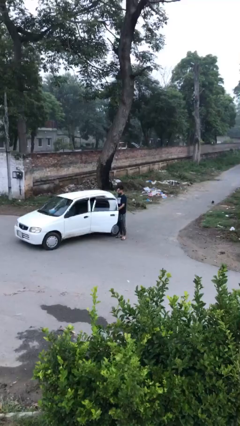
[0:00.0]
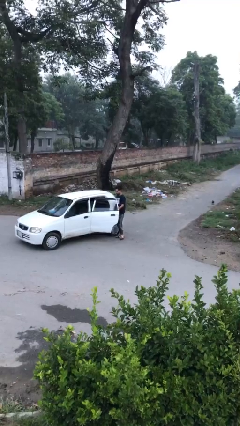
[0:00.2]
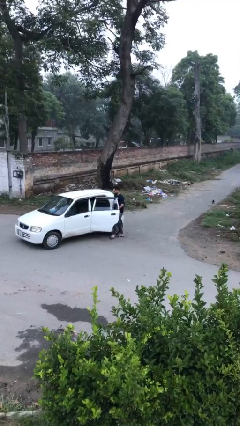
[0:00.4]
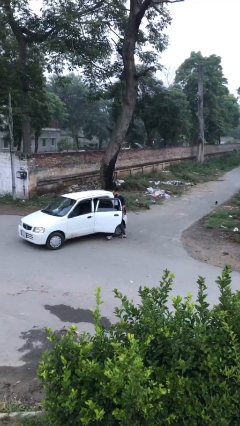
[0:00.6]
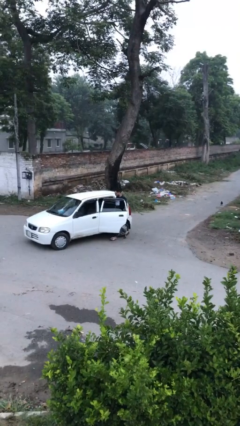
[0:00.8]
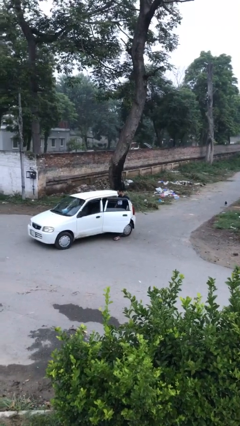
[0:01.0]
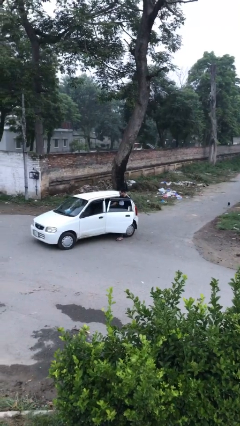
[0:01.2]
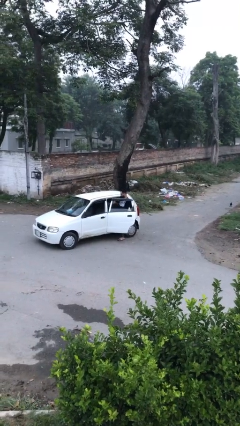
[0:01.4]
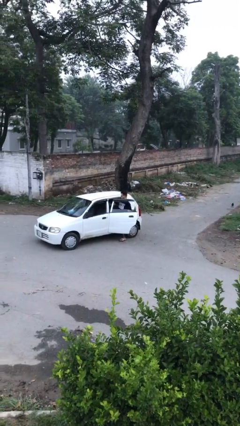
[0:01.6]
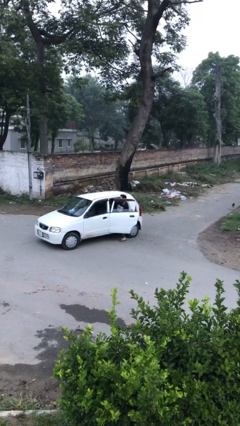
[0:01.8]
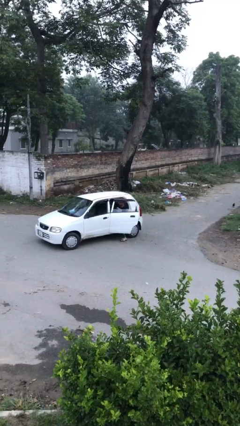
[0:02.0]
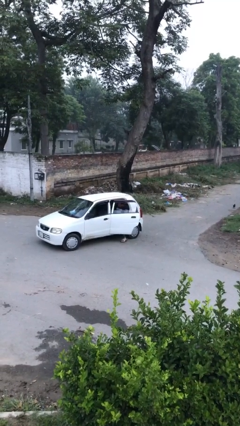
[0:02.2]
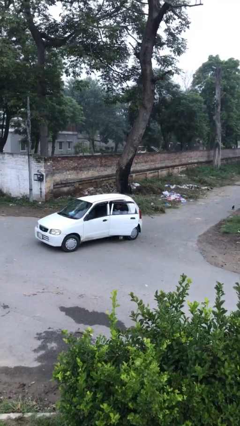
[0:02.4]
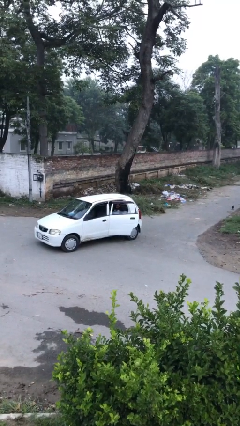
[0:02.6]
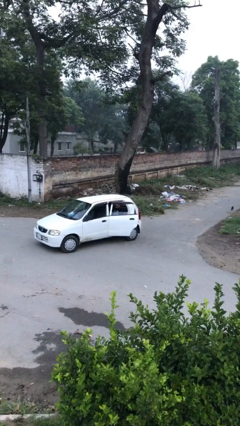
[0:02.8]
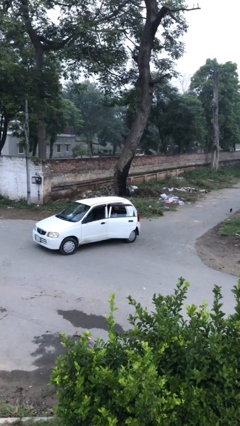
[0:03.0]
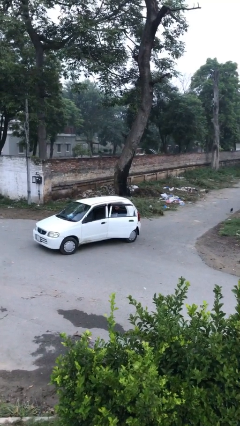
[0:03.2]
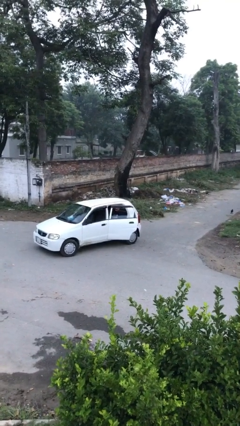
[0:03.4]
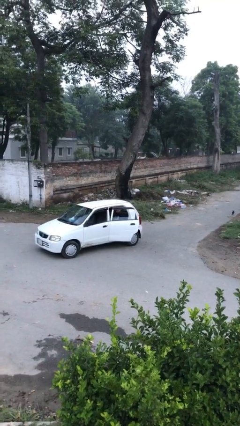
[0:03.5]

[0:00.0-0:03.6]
person enters car

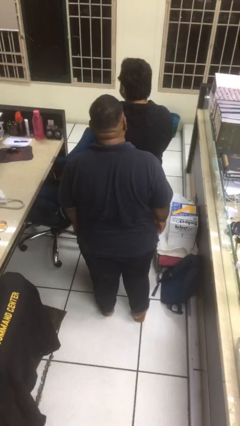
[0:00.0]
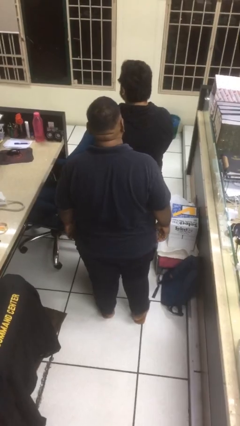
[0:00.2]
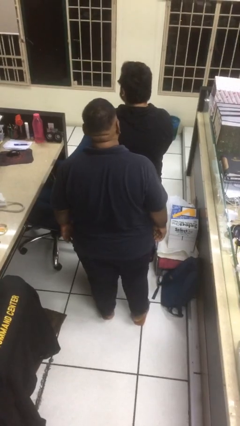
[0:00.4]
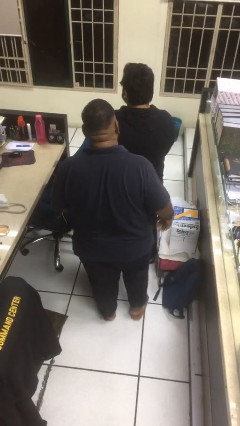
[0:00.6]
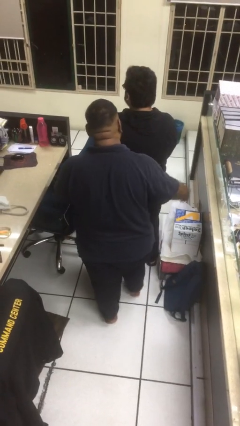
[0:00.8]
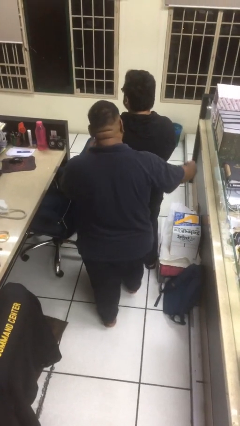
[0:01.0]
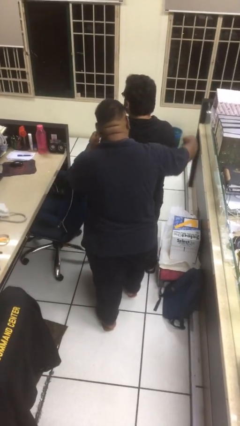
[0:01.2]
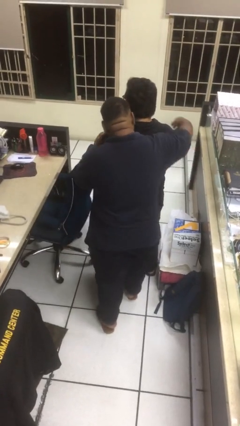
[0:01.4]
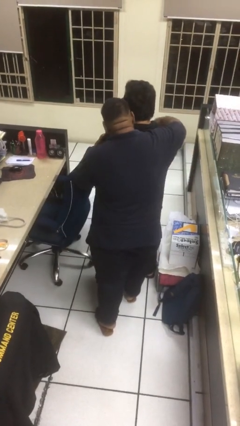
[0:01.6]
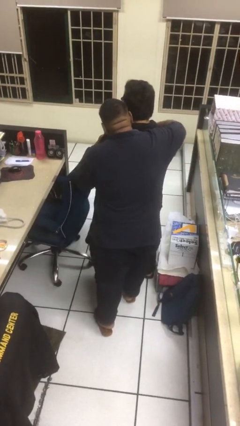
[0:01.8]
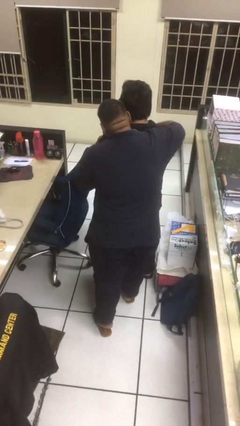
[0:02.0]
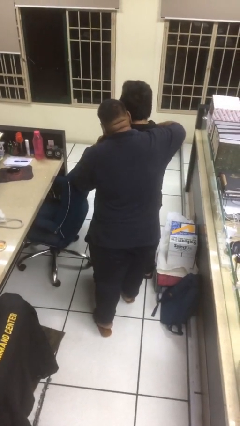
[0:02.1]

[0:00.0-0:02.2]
person hugs person from behind

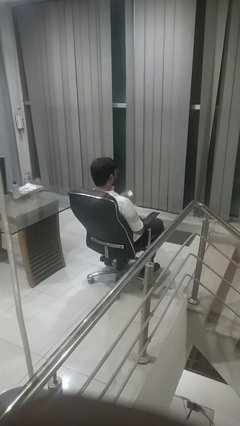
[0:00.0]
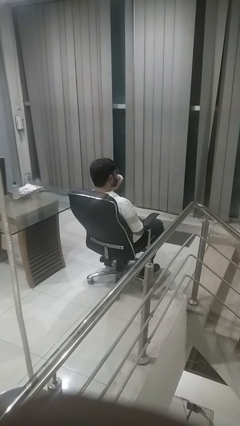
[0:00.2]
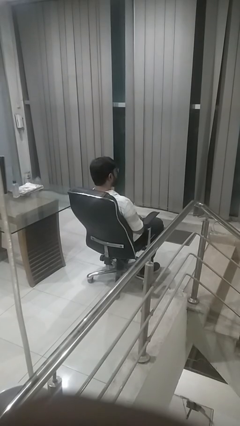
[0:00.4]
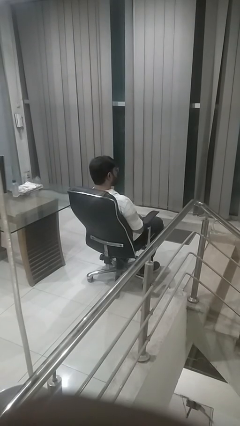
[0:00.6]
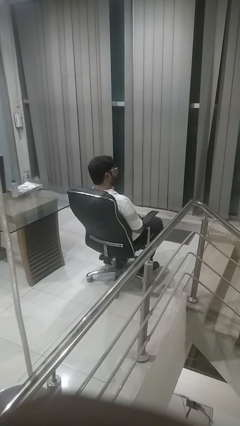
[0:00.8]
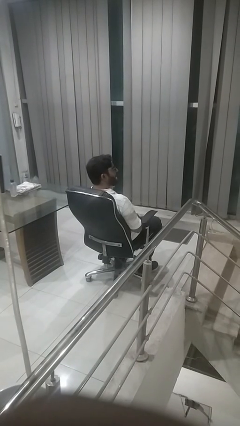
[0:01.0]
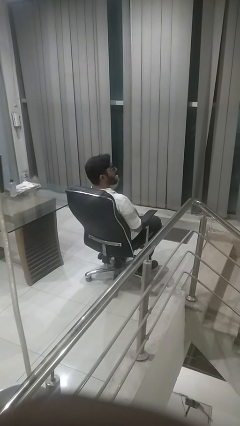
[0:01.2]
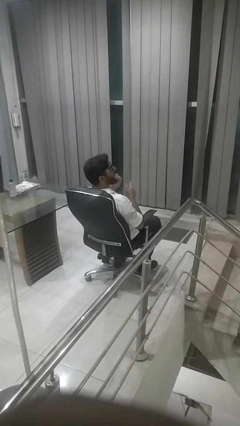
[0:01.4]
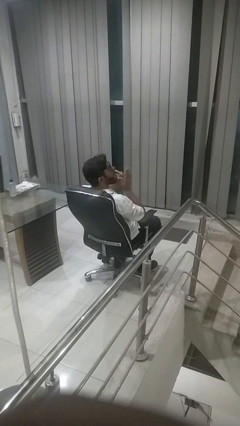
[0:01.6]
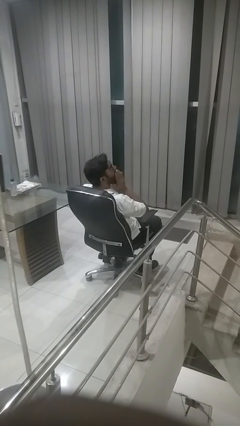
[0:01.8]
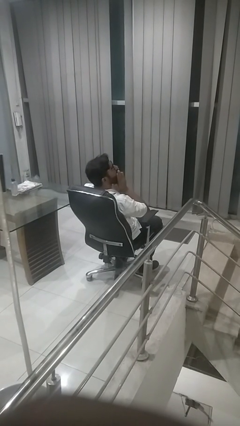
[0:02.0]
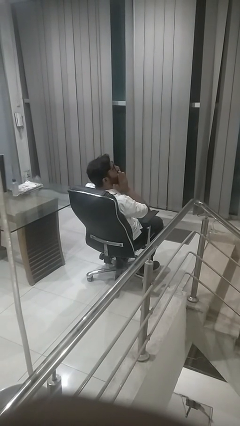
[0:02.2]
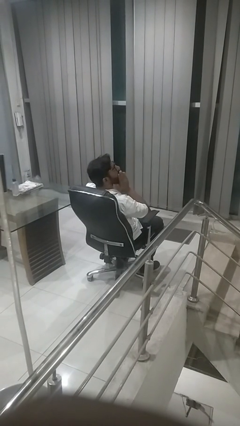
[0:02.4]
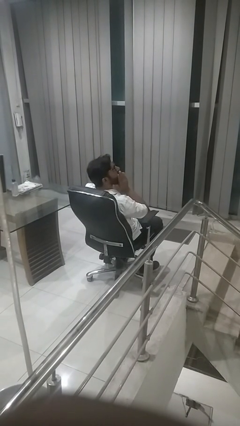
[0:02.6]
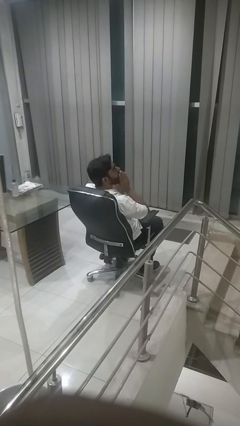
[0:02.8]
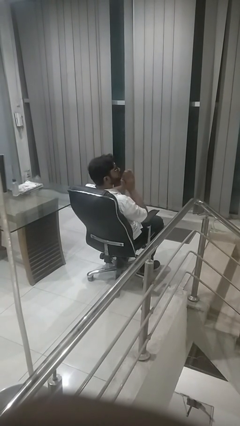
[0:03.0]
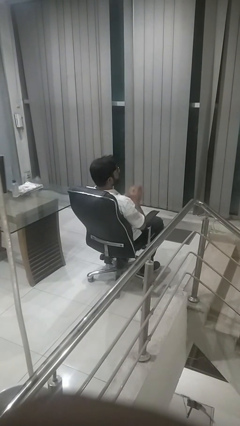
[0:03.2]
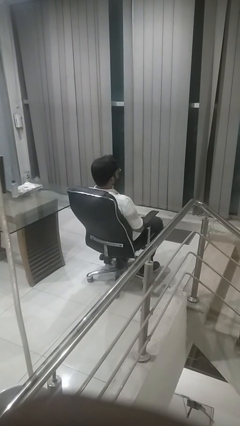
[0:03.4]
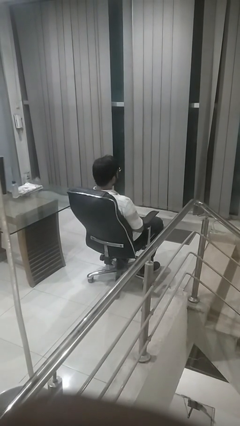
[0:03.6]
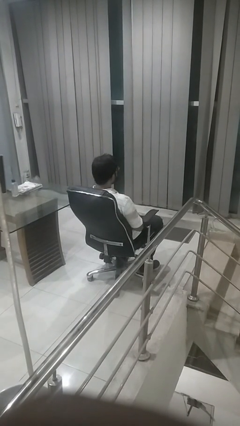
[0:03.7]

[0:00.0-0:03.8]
person yawns

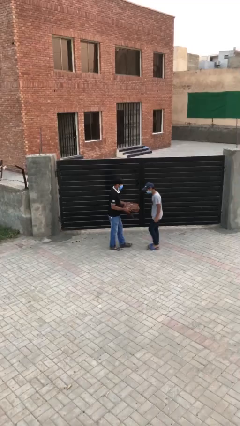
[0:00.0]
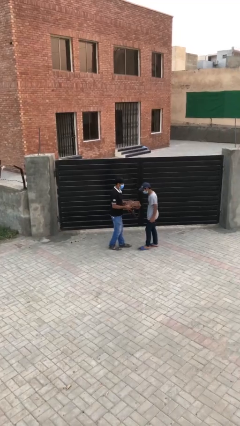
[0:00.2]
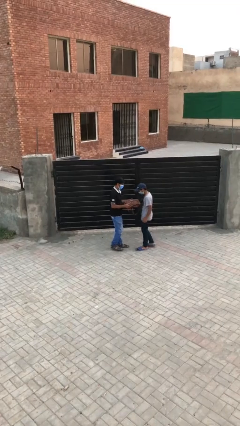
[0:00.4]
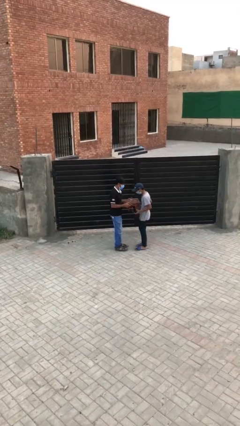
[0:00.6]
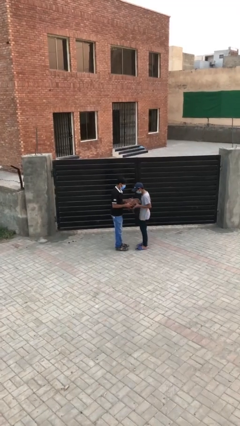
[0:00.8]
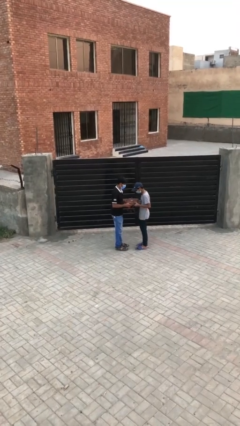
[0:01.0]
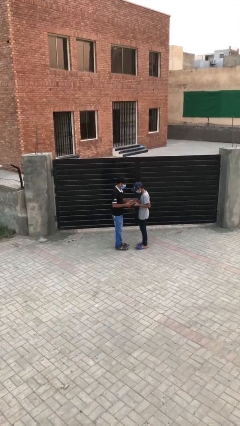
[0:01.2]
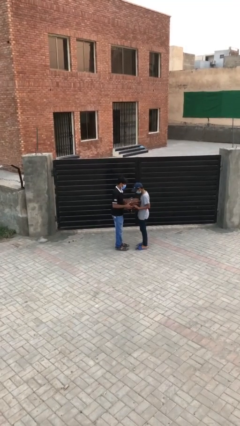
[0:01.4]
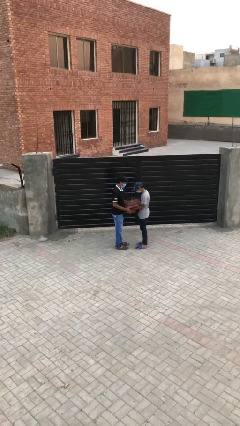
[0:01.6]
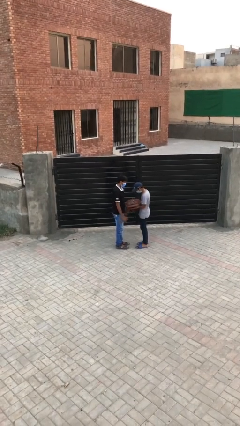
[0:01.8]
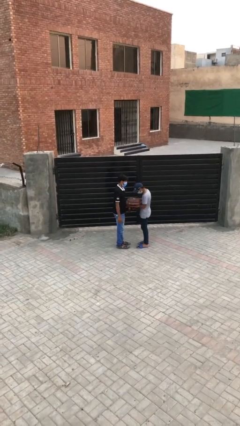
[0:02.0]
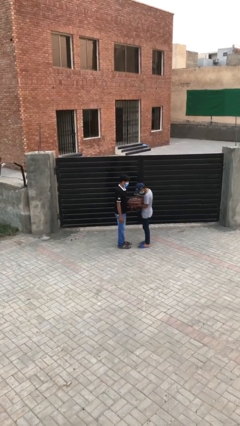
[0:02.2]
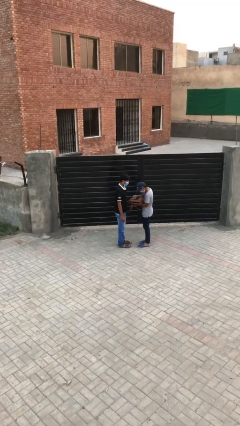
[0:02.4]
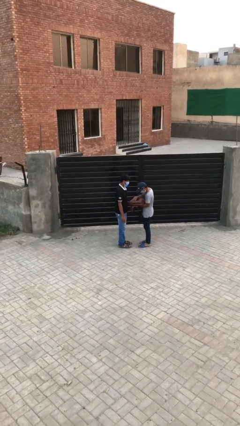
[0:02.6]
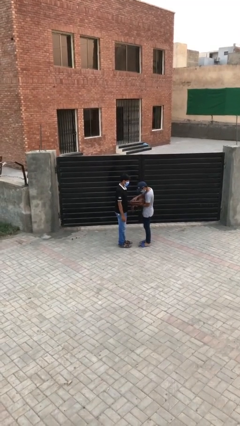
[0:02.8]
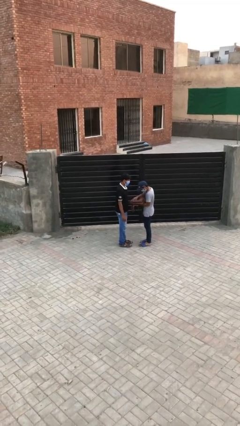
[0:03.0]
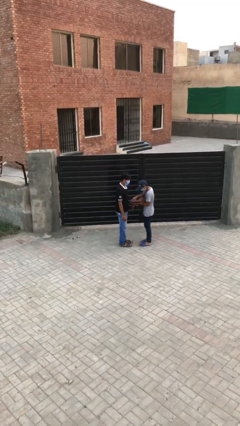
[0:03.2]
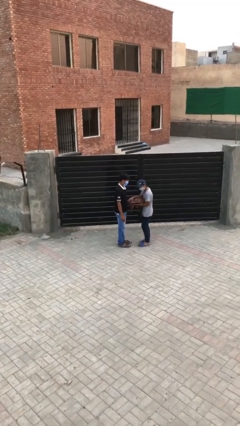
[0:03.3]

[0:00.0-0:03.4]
person transfers object to person

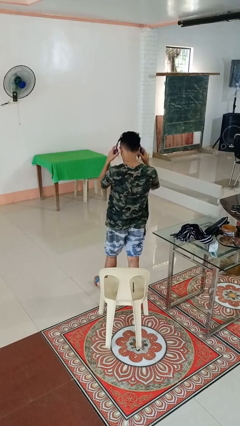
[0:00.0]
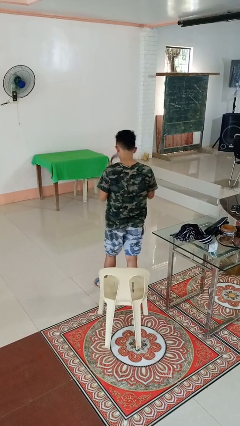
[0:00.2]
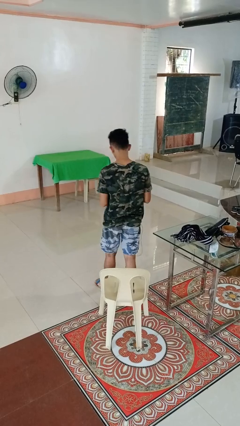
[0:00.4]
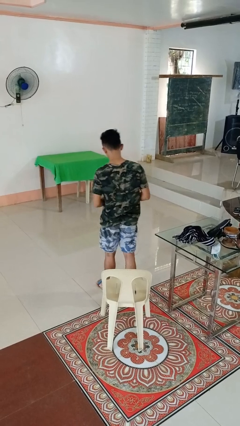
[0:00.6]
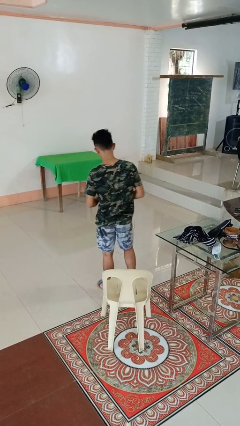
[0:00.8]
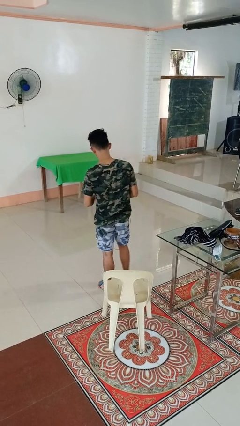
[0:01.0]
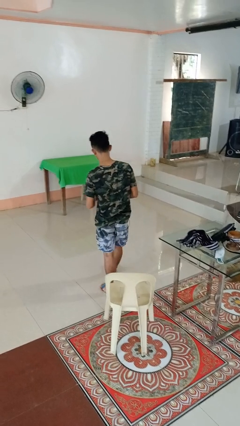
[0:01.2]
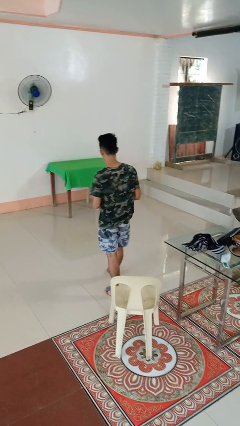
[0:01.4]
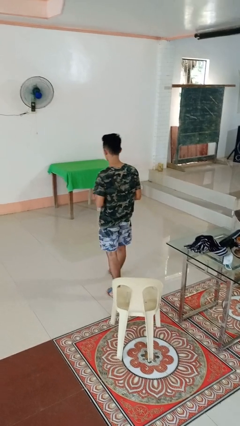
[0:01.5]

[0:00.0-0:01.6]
person takes off headphones

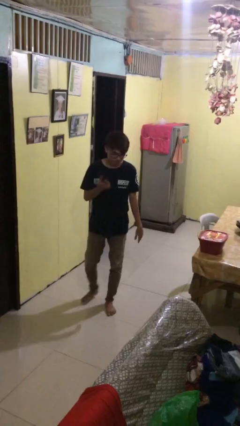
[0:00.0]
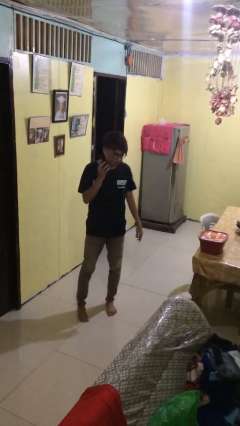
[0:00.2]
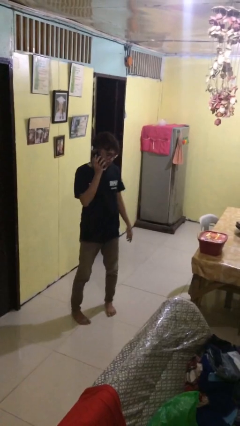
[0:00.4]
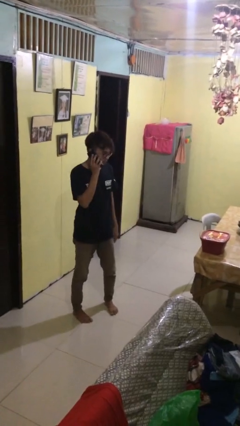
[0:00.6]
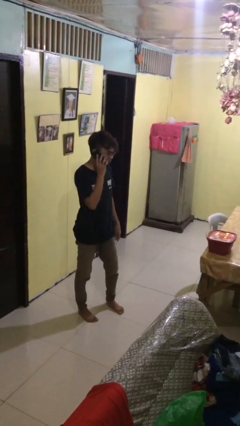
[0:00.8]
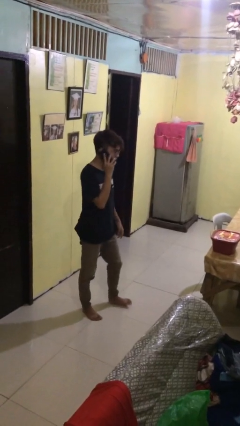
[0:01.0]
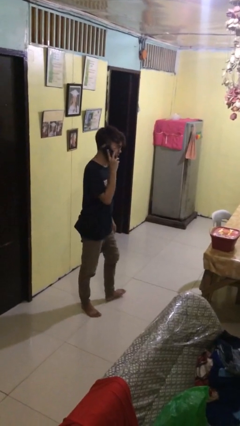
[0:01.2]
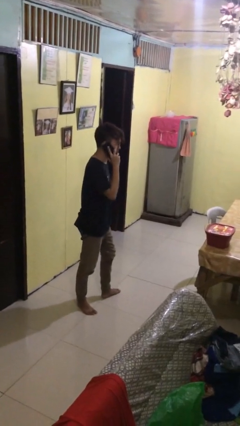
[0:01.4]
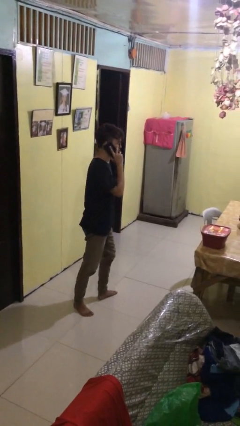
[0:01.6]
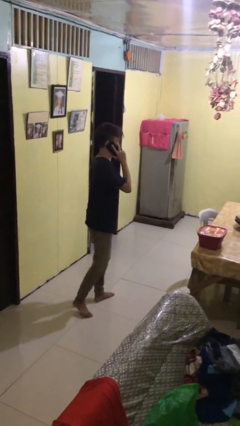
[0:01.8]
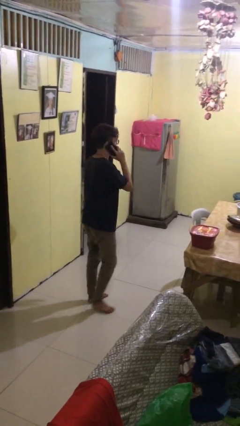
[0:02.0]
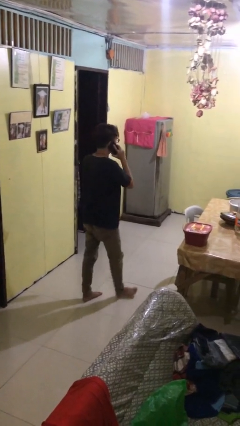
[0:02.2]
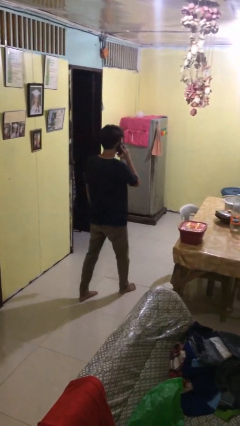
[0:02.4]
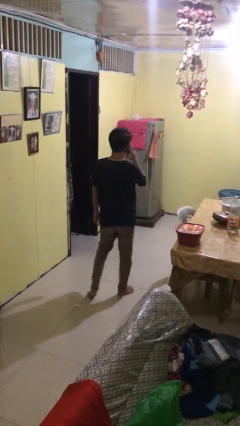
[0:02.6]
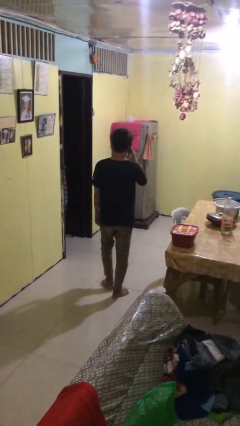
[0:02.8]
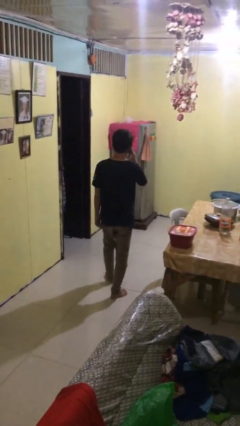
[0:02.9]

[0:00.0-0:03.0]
person talks on phone
